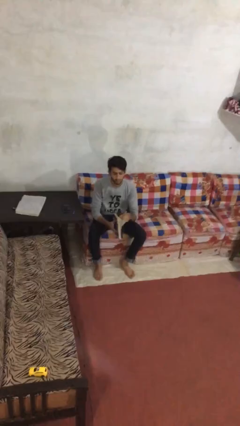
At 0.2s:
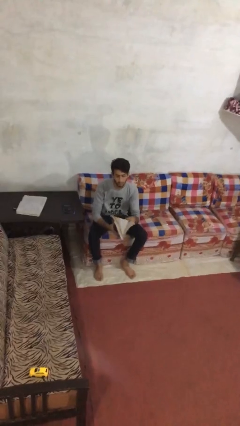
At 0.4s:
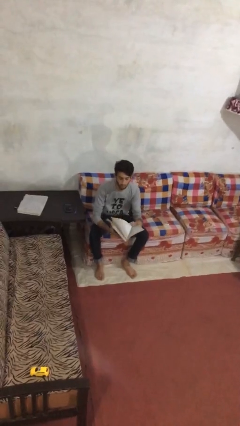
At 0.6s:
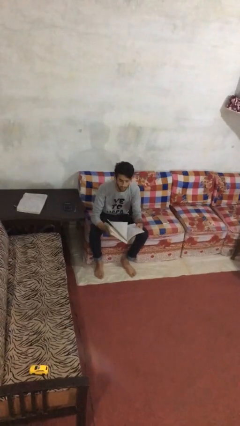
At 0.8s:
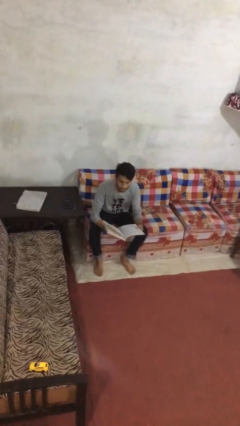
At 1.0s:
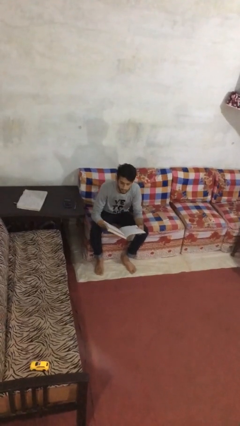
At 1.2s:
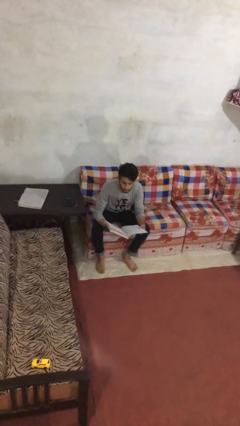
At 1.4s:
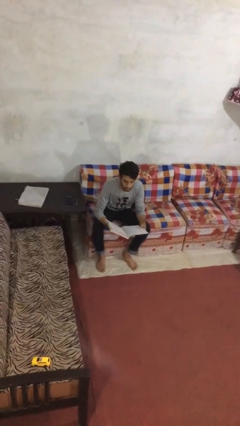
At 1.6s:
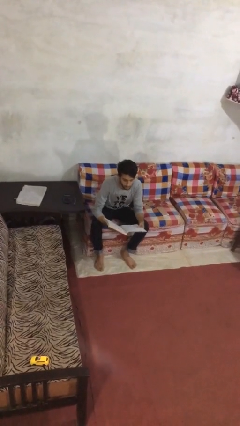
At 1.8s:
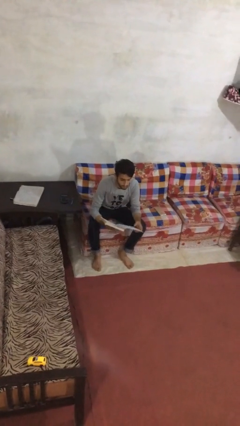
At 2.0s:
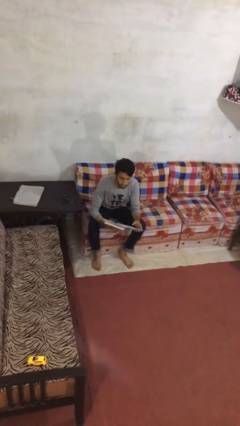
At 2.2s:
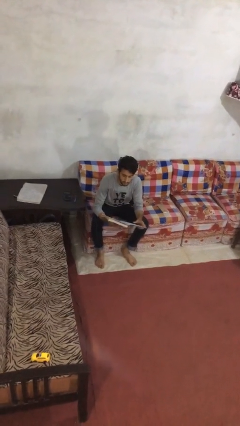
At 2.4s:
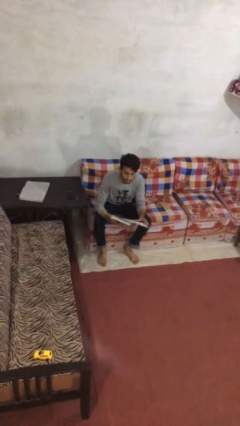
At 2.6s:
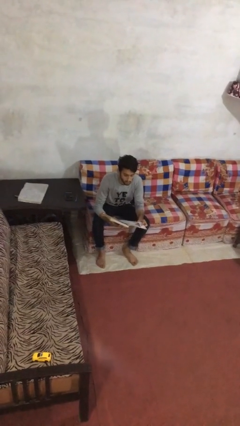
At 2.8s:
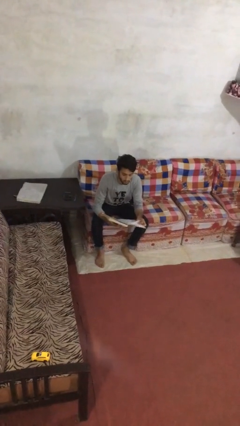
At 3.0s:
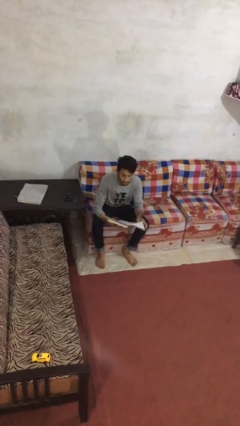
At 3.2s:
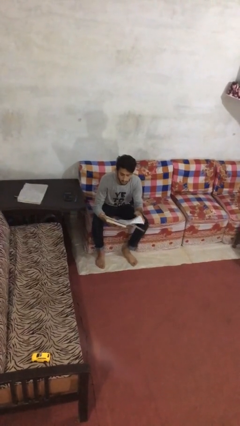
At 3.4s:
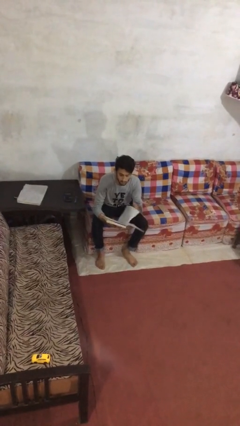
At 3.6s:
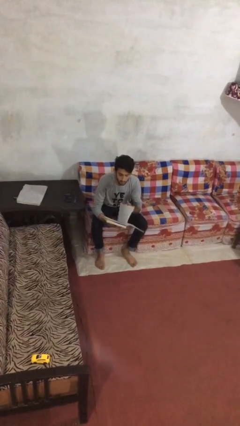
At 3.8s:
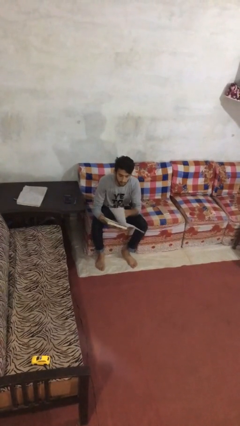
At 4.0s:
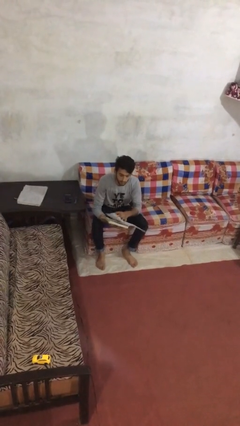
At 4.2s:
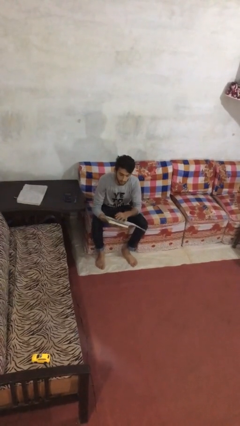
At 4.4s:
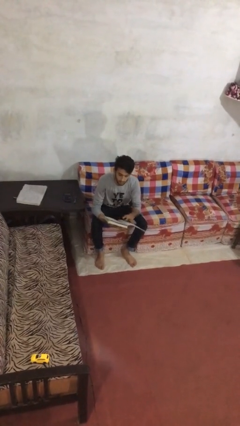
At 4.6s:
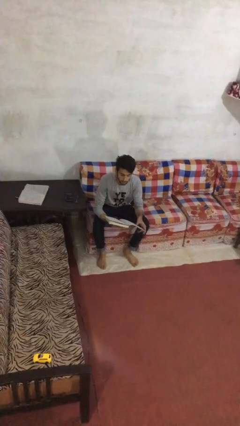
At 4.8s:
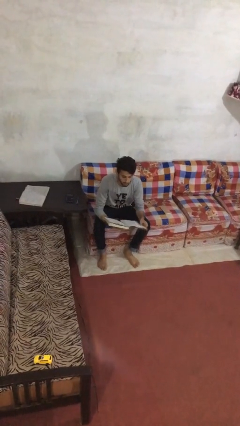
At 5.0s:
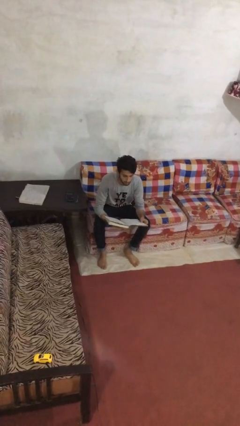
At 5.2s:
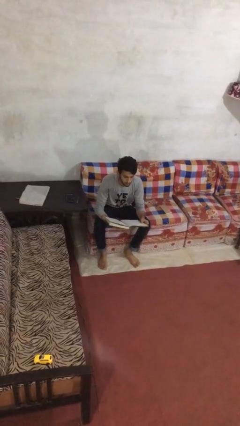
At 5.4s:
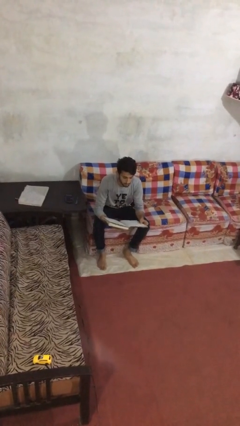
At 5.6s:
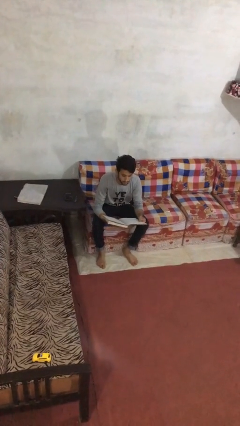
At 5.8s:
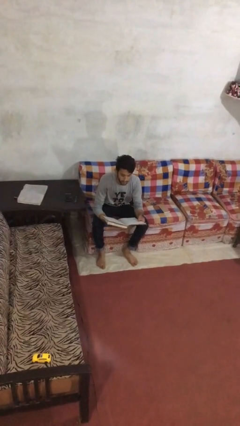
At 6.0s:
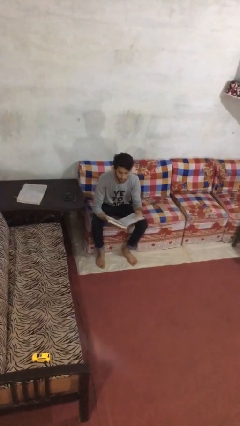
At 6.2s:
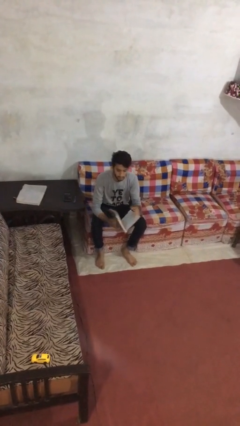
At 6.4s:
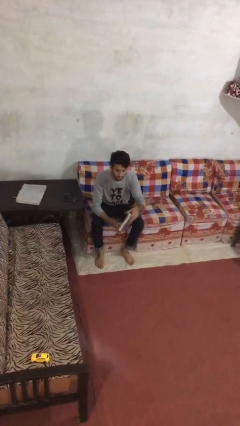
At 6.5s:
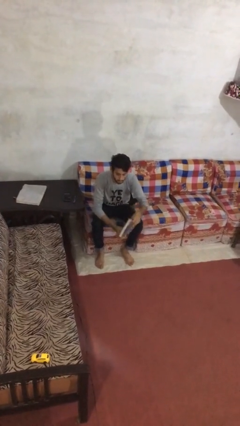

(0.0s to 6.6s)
person reads document

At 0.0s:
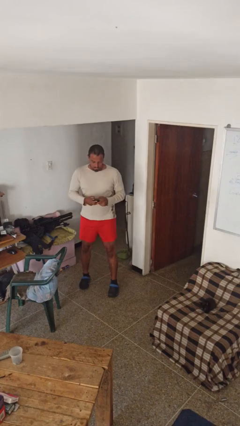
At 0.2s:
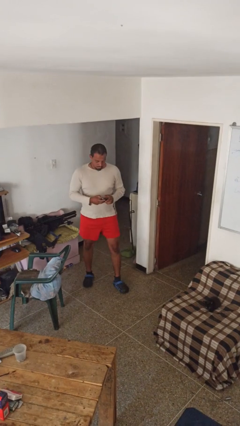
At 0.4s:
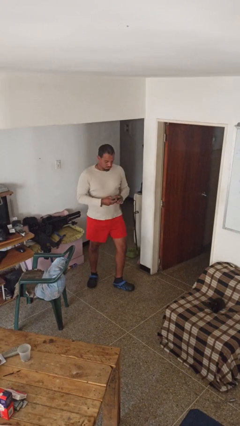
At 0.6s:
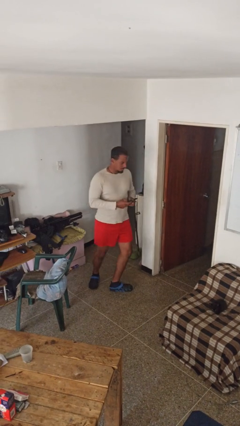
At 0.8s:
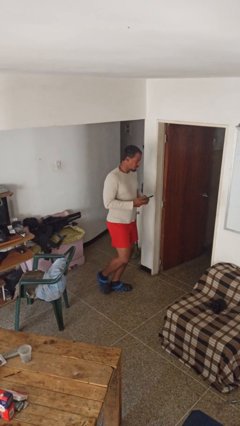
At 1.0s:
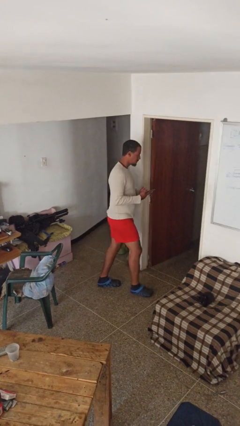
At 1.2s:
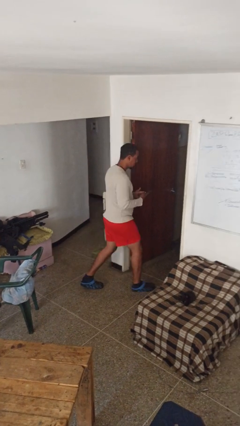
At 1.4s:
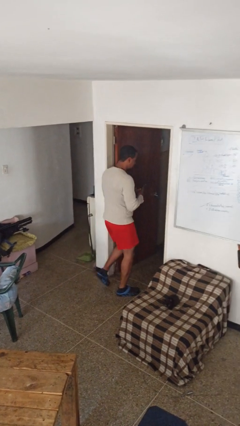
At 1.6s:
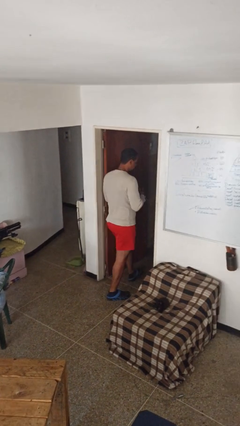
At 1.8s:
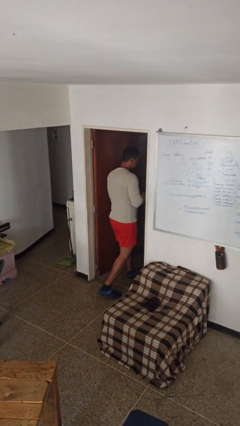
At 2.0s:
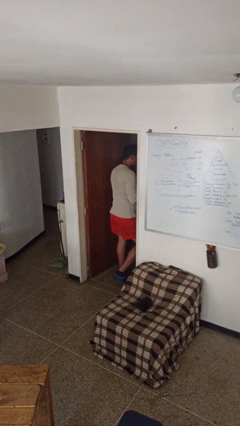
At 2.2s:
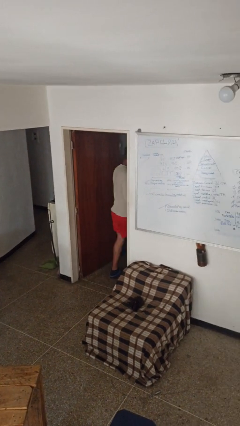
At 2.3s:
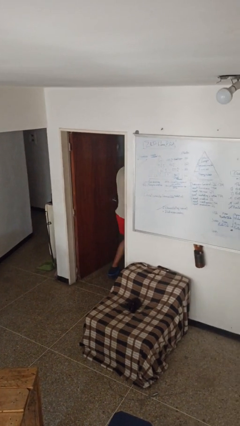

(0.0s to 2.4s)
person exits scene through structure

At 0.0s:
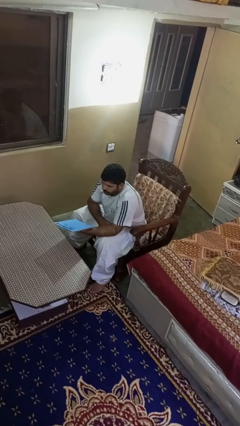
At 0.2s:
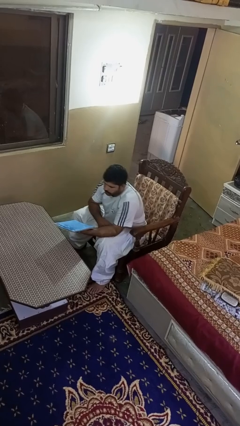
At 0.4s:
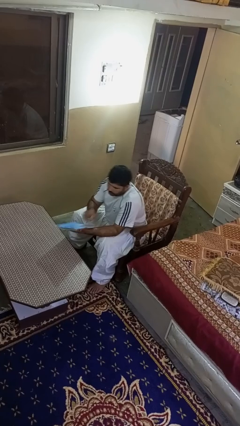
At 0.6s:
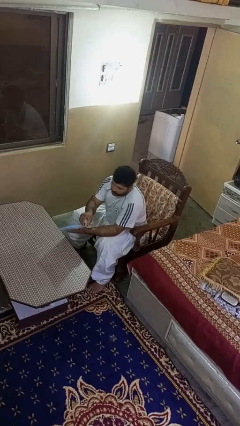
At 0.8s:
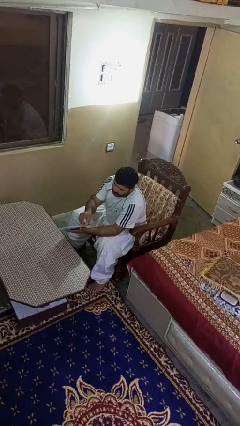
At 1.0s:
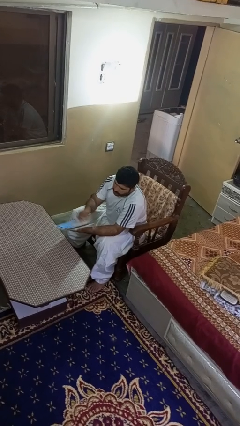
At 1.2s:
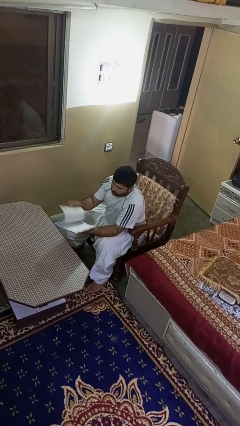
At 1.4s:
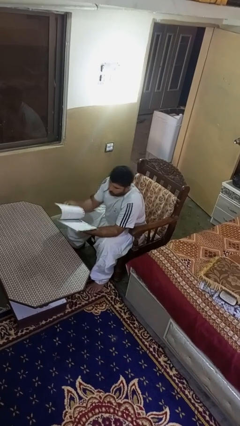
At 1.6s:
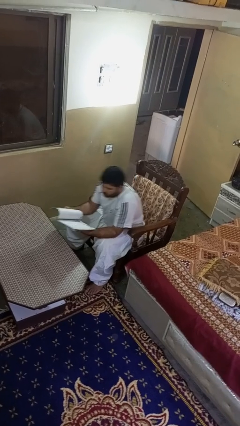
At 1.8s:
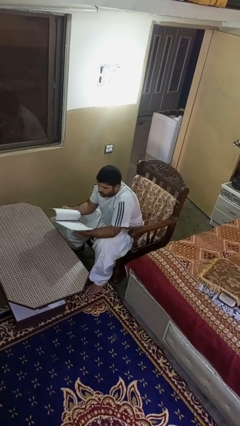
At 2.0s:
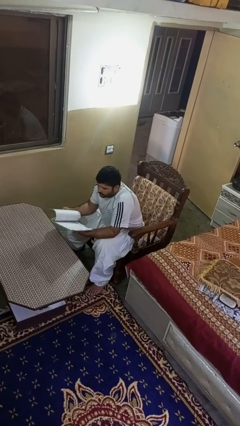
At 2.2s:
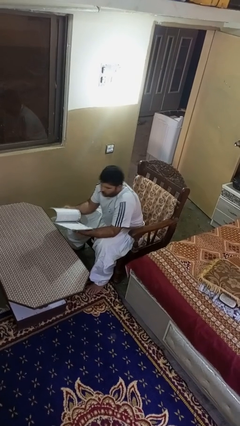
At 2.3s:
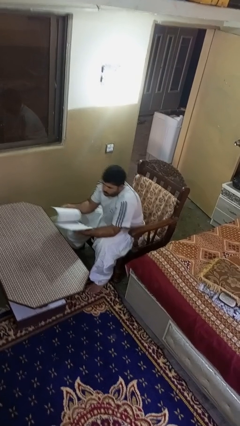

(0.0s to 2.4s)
person reads magazine

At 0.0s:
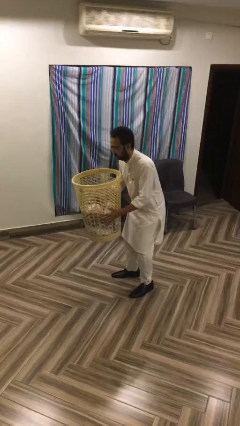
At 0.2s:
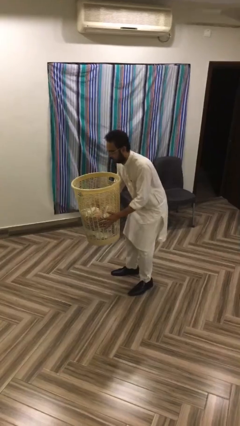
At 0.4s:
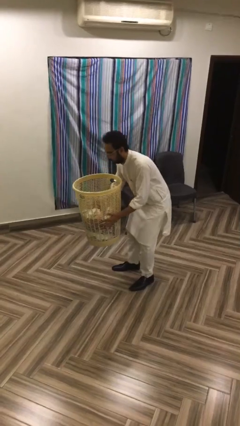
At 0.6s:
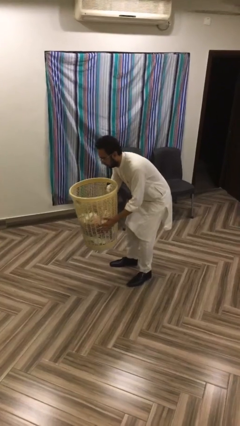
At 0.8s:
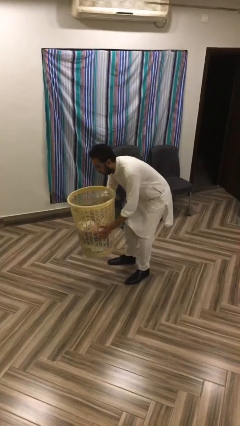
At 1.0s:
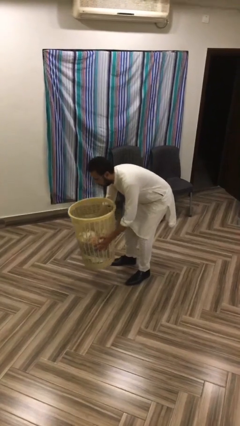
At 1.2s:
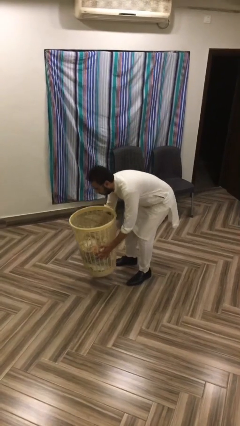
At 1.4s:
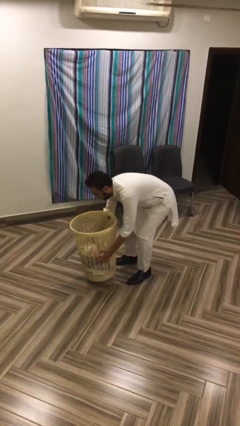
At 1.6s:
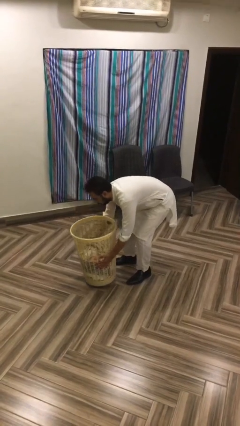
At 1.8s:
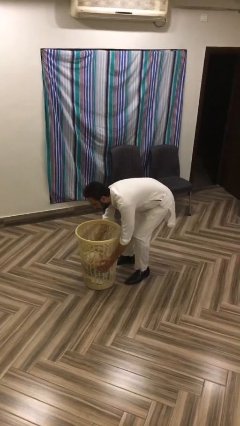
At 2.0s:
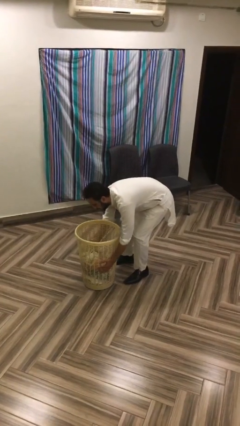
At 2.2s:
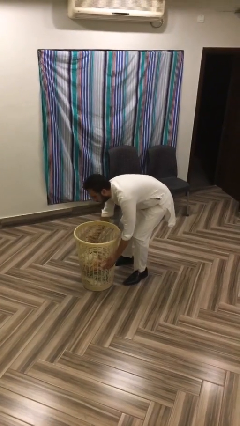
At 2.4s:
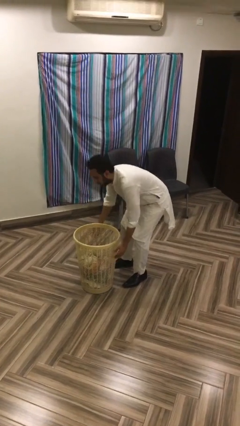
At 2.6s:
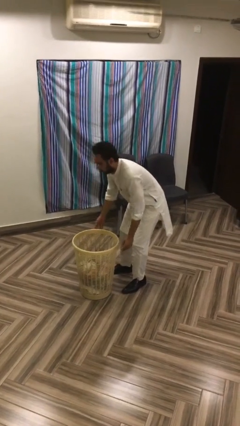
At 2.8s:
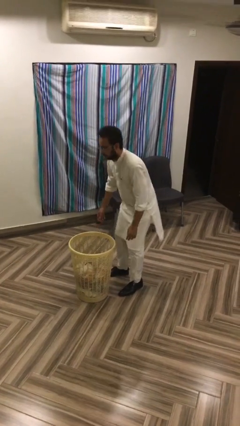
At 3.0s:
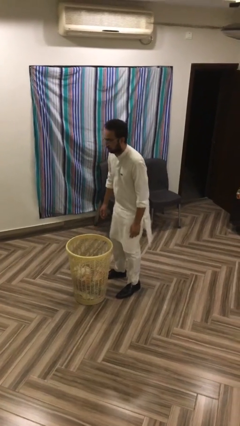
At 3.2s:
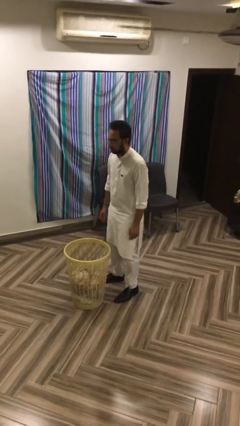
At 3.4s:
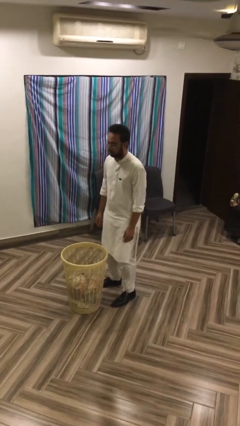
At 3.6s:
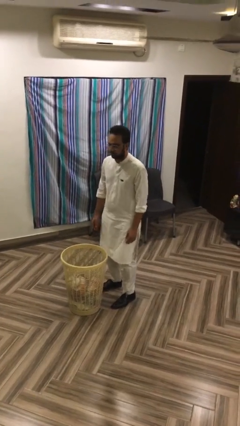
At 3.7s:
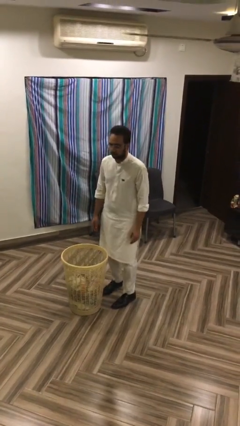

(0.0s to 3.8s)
person puts down object on floor

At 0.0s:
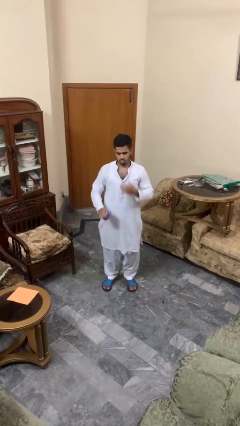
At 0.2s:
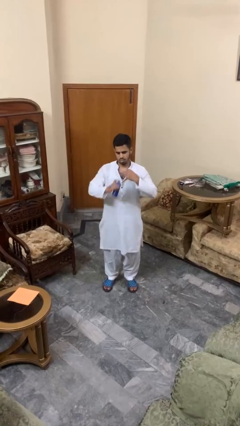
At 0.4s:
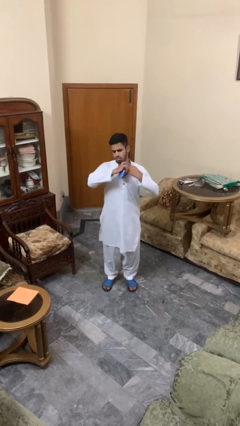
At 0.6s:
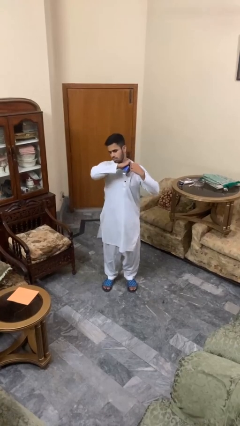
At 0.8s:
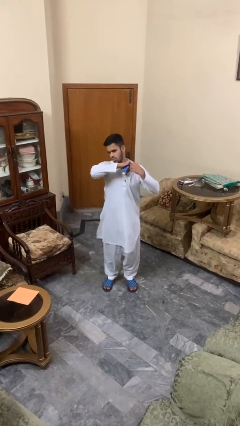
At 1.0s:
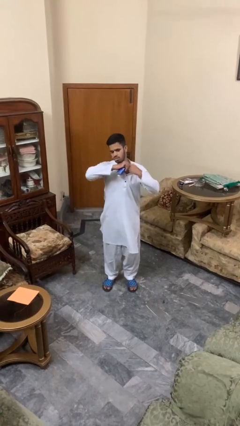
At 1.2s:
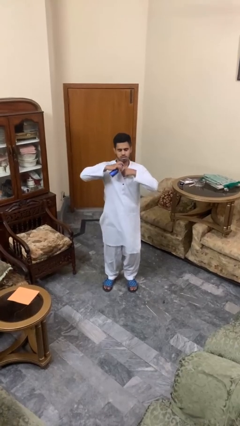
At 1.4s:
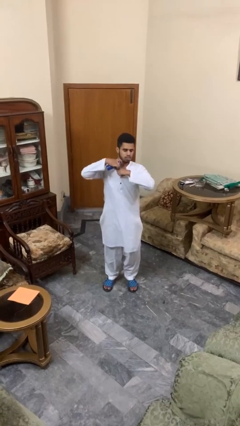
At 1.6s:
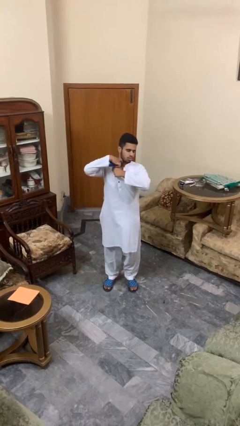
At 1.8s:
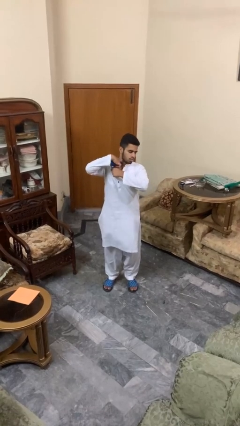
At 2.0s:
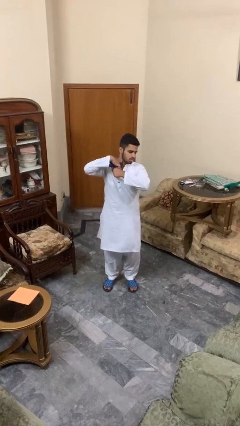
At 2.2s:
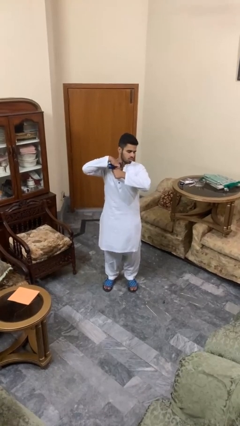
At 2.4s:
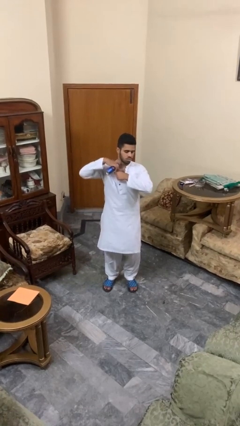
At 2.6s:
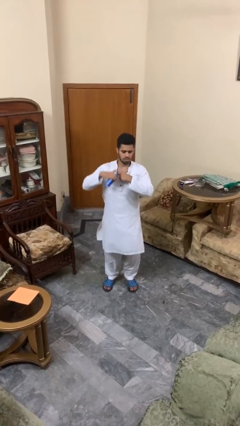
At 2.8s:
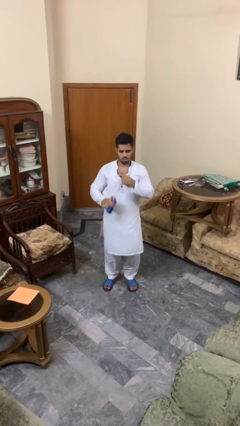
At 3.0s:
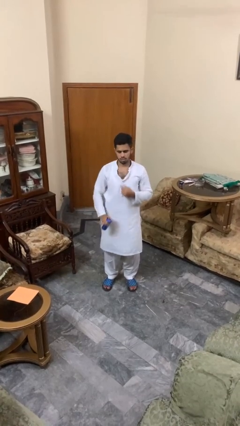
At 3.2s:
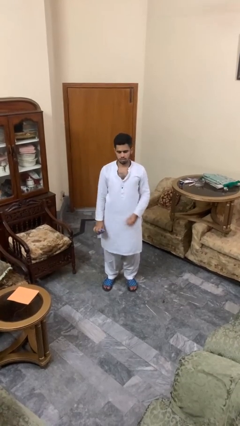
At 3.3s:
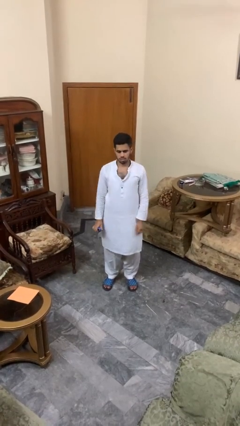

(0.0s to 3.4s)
person applies deodorant
